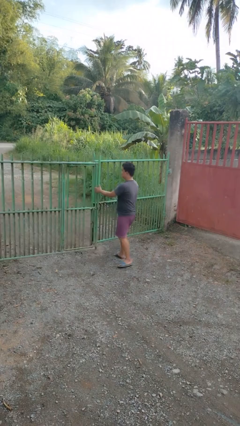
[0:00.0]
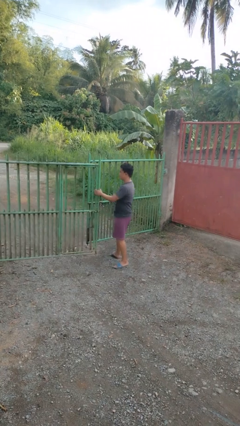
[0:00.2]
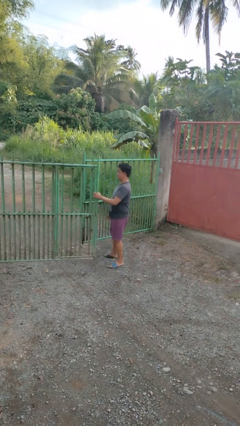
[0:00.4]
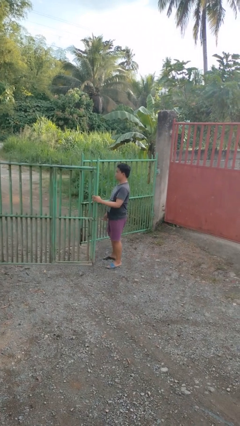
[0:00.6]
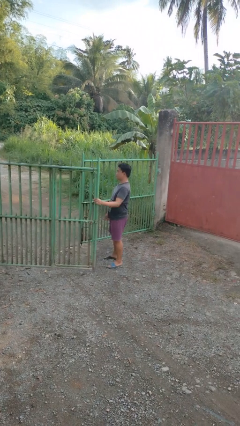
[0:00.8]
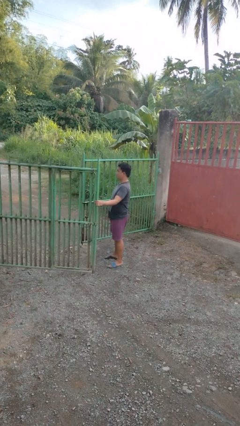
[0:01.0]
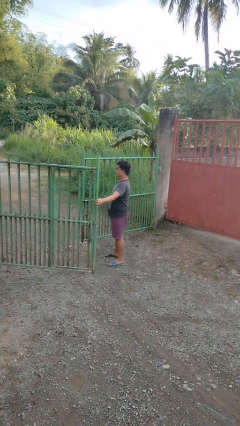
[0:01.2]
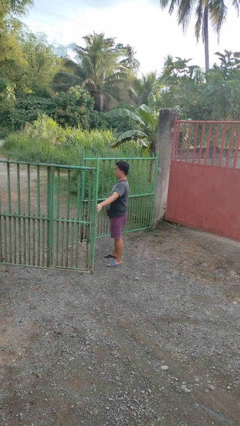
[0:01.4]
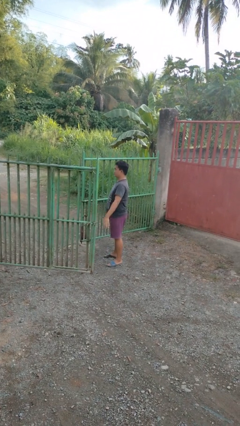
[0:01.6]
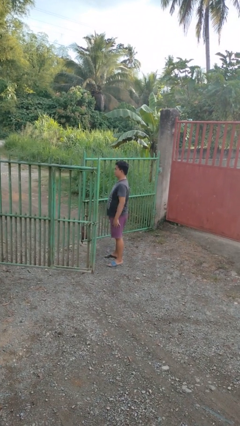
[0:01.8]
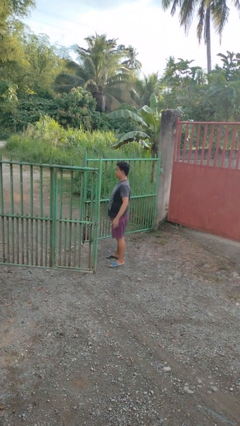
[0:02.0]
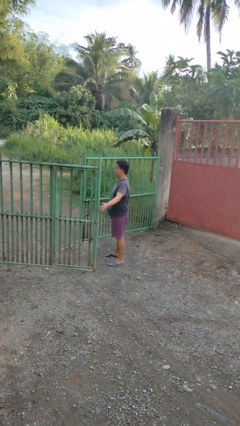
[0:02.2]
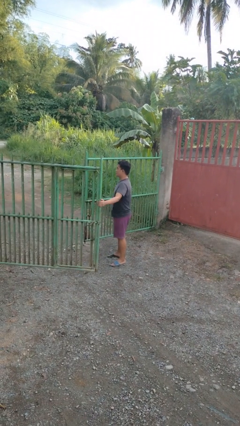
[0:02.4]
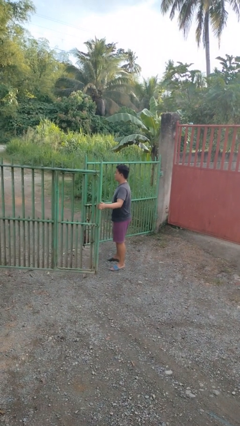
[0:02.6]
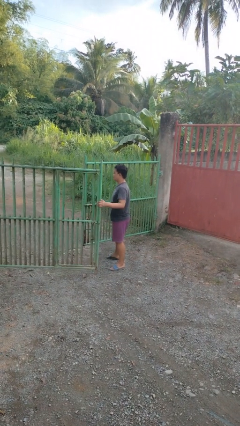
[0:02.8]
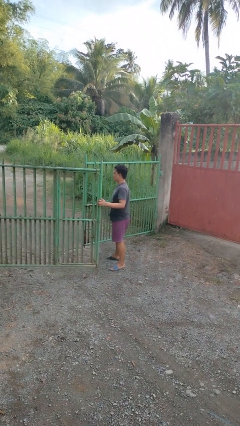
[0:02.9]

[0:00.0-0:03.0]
person opens gate

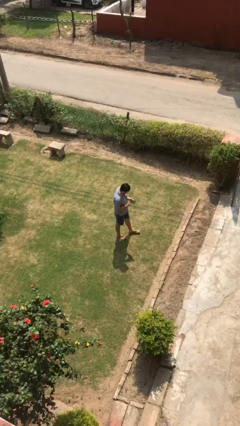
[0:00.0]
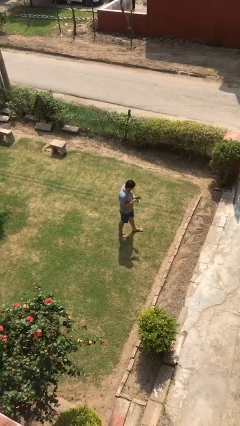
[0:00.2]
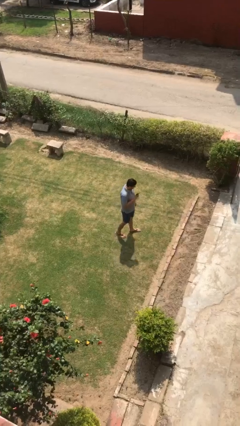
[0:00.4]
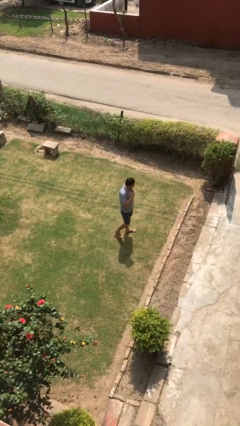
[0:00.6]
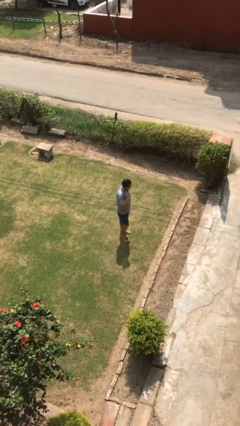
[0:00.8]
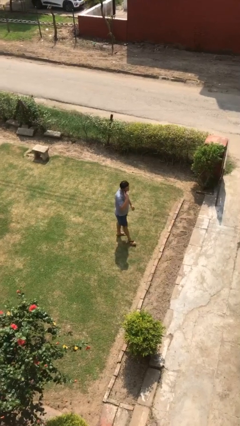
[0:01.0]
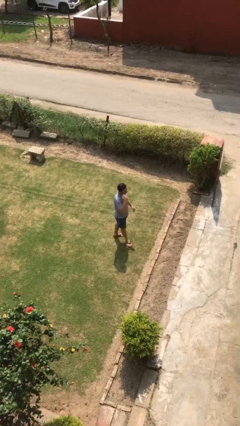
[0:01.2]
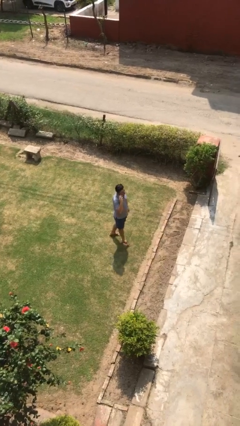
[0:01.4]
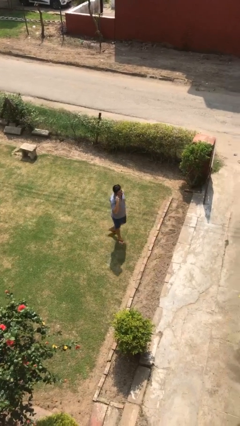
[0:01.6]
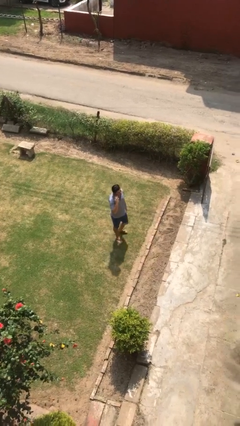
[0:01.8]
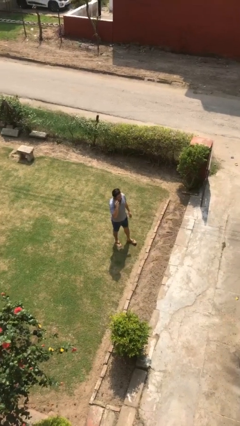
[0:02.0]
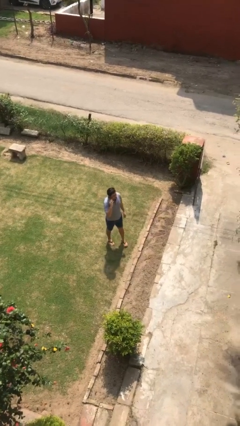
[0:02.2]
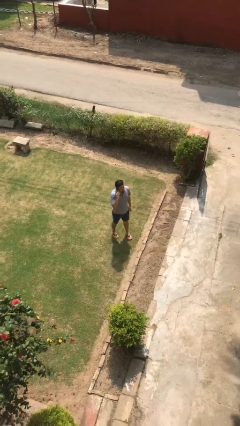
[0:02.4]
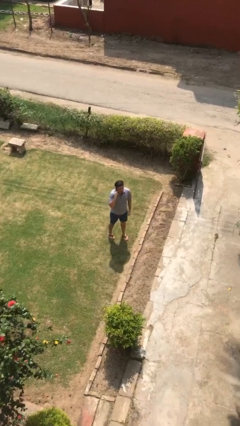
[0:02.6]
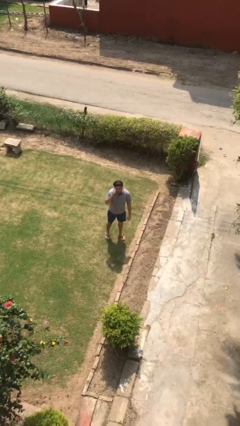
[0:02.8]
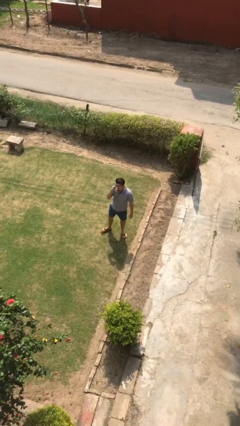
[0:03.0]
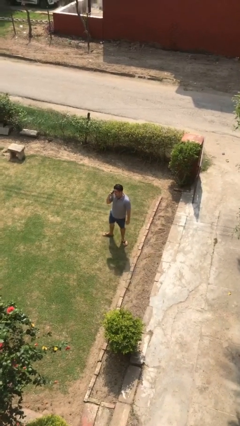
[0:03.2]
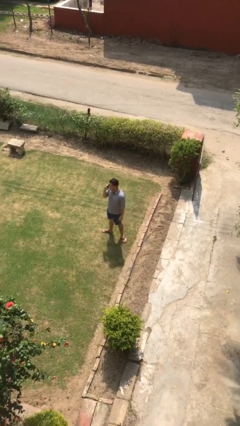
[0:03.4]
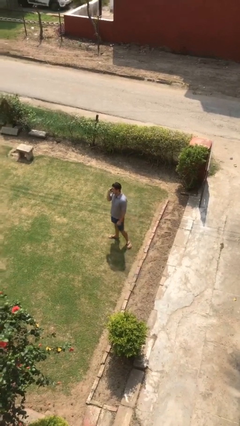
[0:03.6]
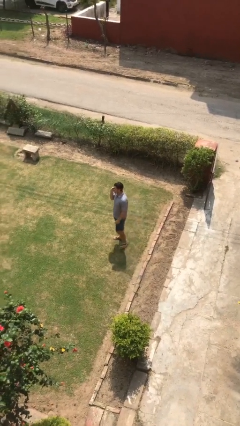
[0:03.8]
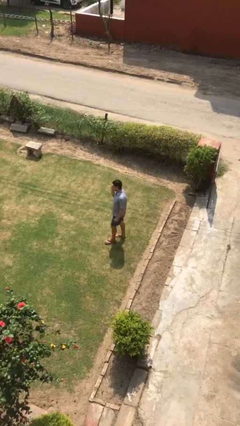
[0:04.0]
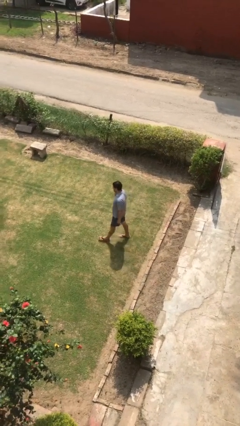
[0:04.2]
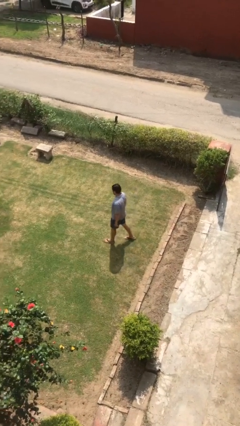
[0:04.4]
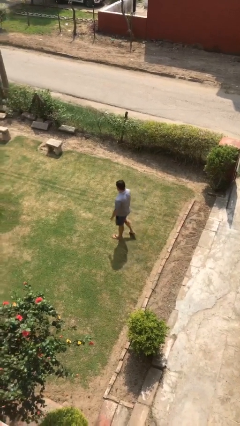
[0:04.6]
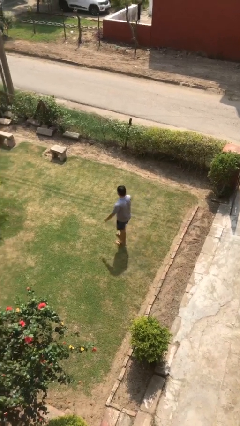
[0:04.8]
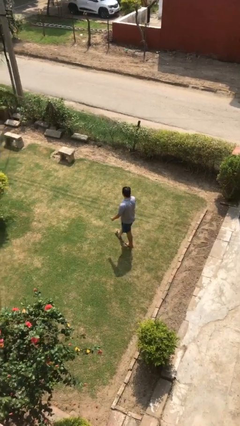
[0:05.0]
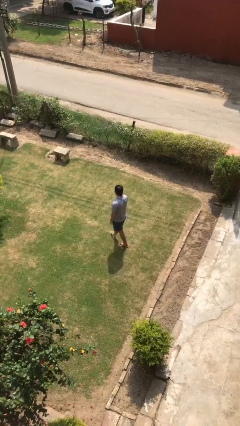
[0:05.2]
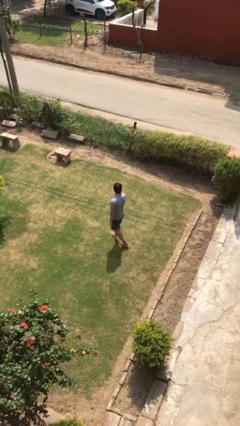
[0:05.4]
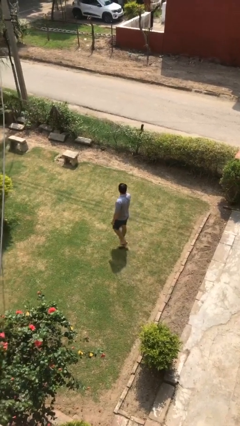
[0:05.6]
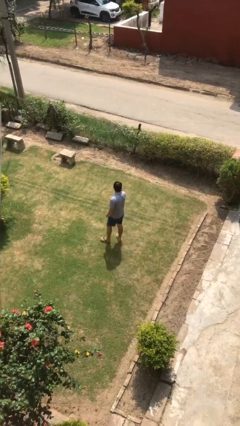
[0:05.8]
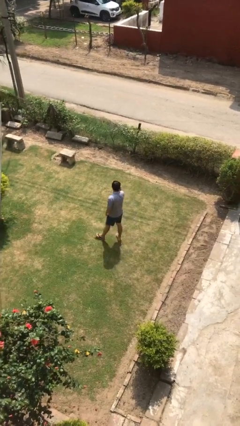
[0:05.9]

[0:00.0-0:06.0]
person talks on phone

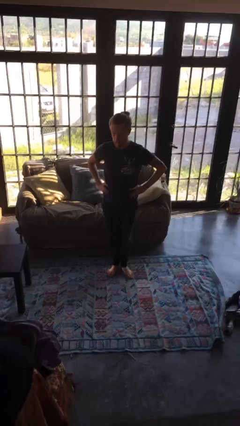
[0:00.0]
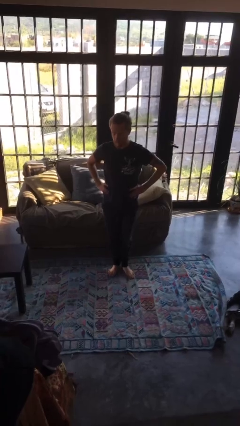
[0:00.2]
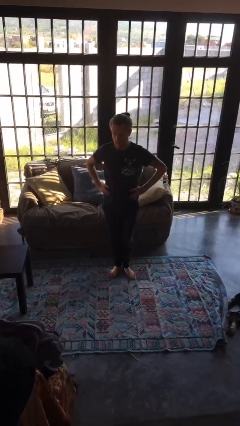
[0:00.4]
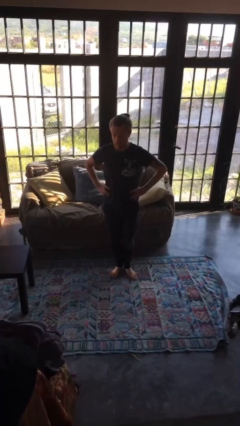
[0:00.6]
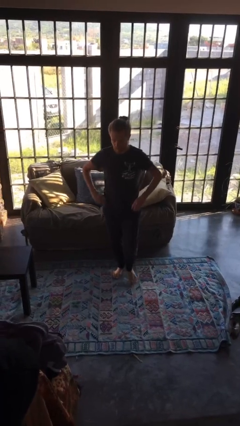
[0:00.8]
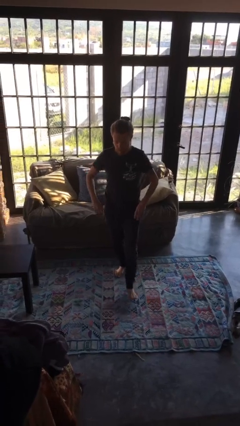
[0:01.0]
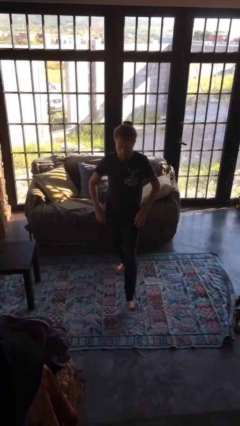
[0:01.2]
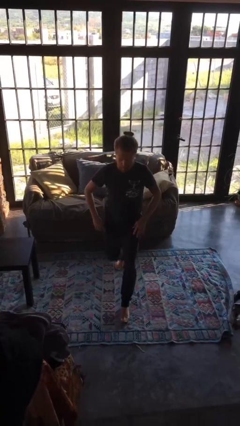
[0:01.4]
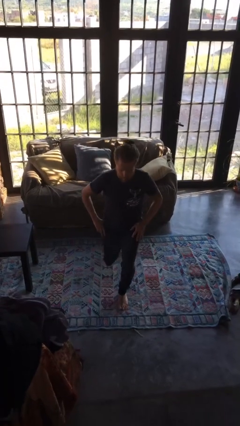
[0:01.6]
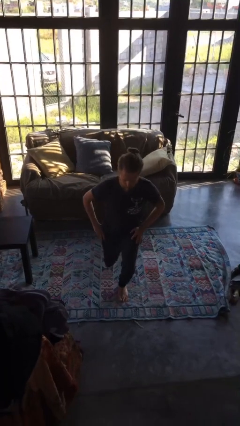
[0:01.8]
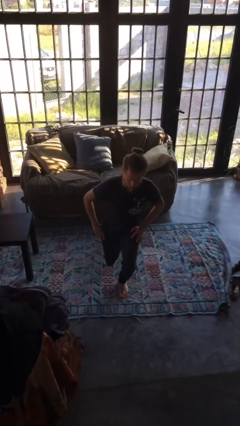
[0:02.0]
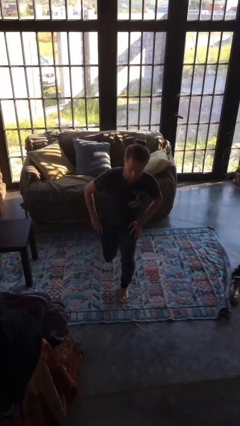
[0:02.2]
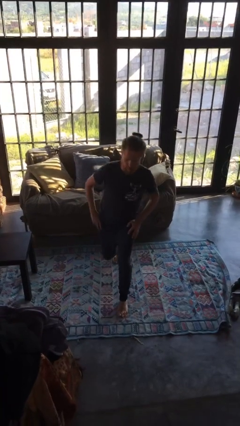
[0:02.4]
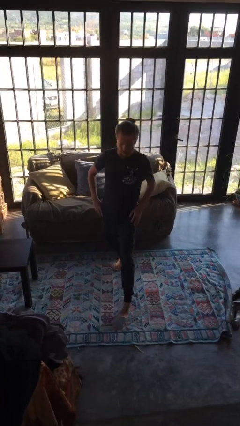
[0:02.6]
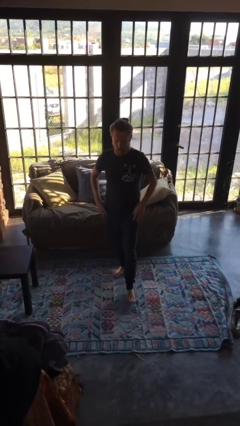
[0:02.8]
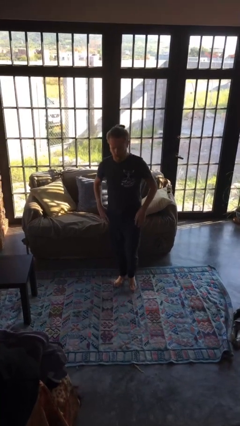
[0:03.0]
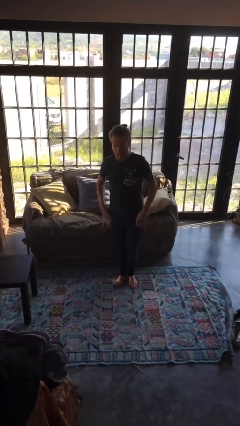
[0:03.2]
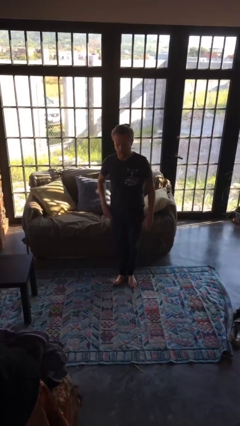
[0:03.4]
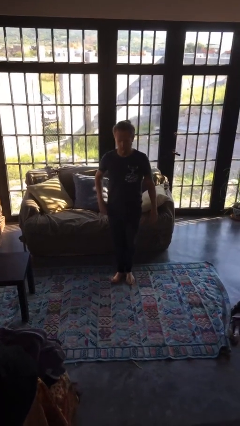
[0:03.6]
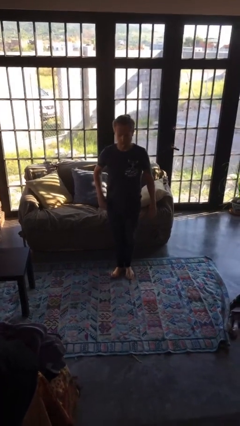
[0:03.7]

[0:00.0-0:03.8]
person exercises with lunges

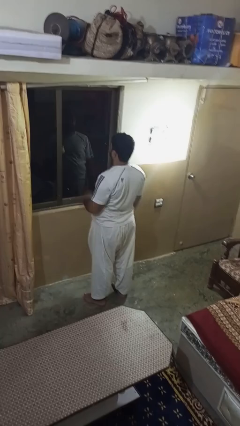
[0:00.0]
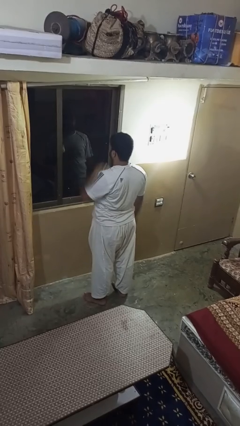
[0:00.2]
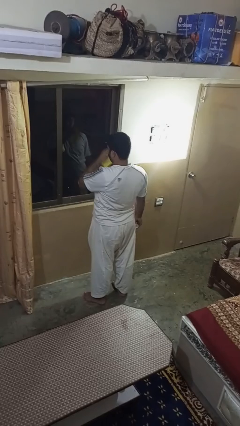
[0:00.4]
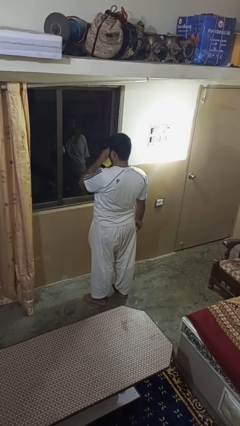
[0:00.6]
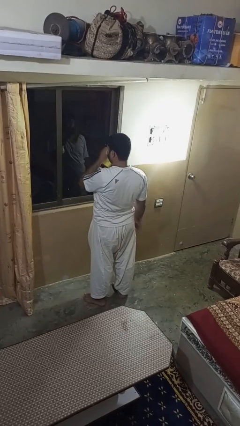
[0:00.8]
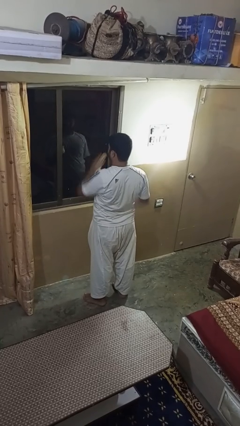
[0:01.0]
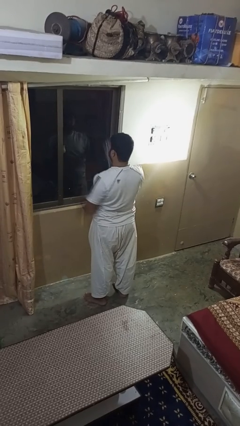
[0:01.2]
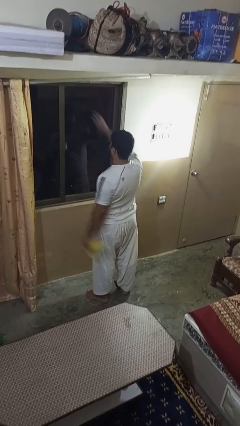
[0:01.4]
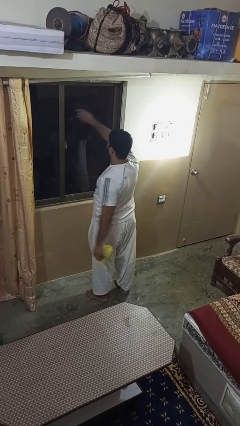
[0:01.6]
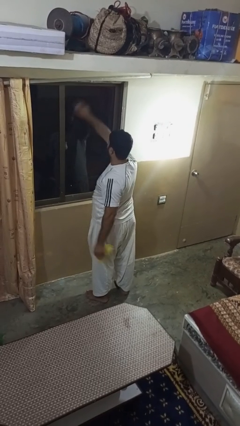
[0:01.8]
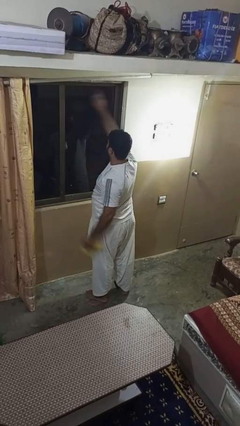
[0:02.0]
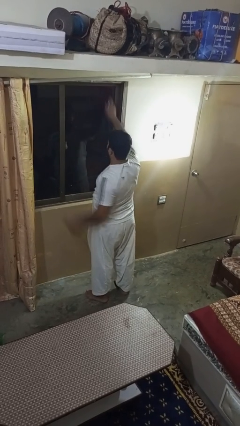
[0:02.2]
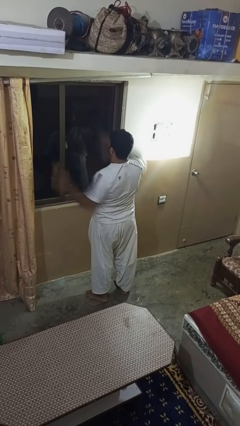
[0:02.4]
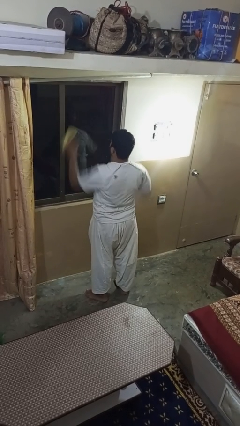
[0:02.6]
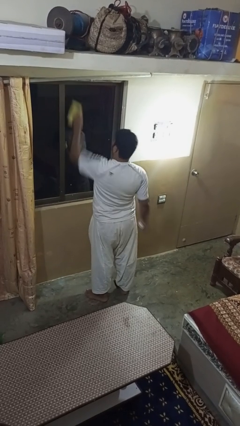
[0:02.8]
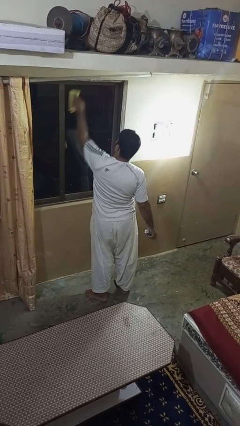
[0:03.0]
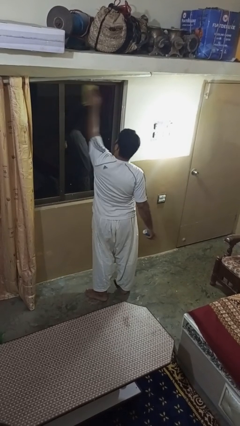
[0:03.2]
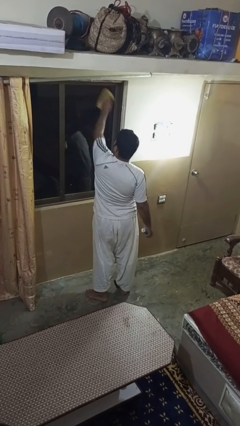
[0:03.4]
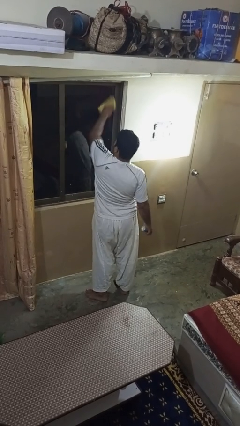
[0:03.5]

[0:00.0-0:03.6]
person sprays from bottle

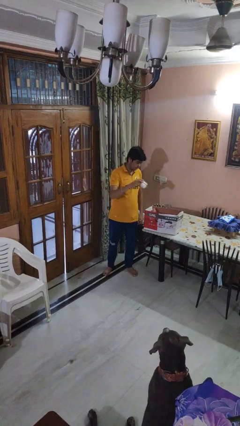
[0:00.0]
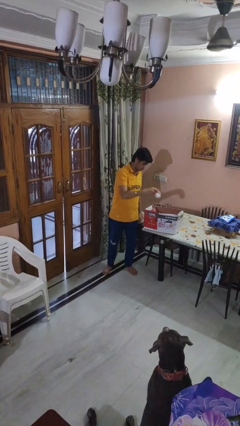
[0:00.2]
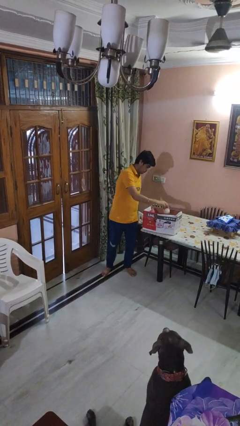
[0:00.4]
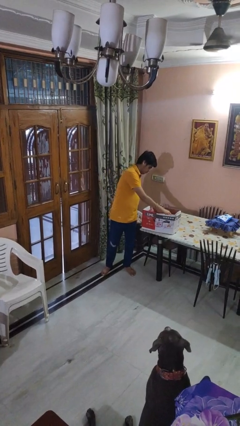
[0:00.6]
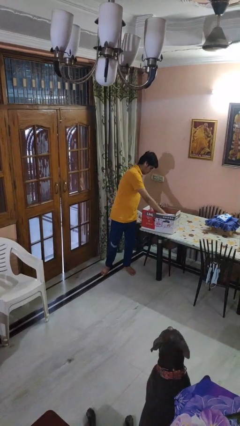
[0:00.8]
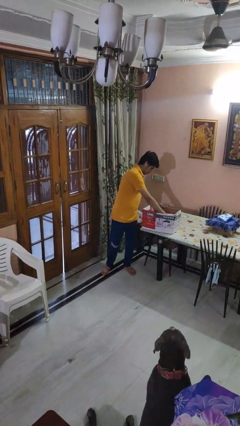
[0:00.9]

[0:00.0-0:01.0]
person puts object into box

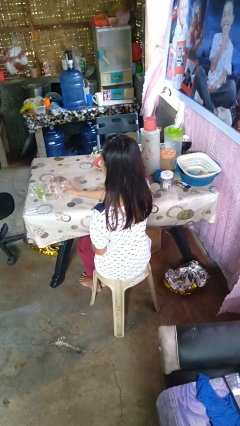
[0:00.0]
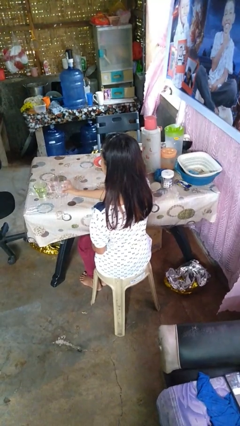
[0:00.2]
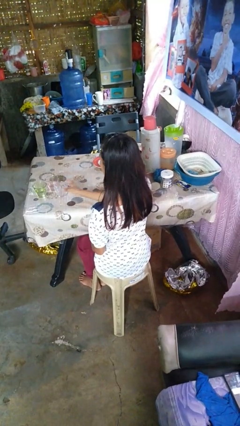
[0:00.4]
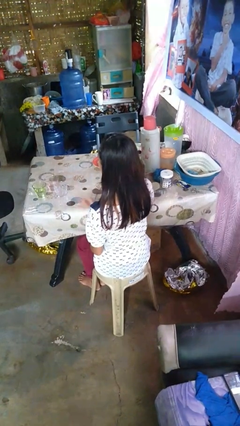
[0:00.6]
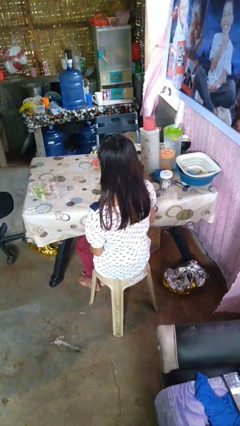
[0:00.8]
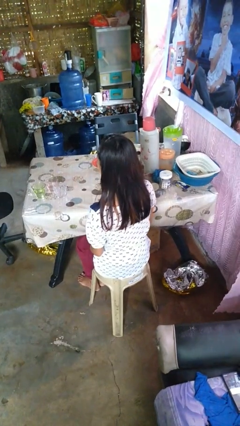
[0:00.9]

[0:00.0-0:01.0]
person puts down object on table
